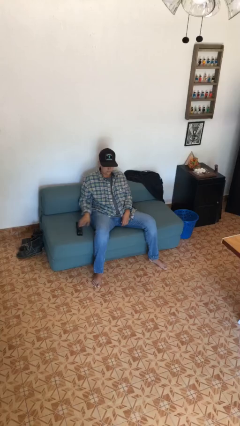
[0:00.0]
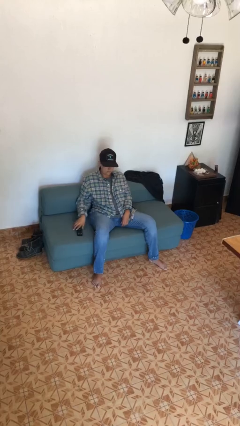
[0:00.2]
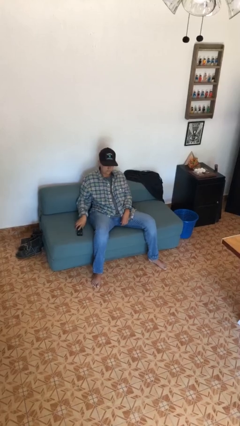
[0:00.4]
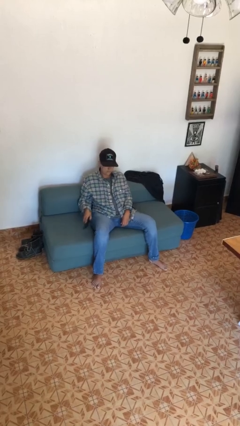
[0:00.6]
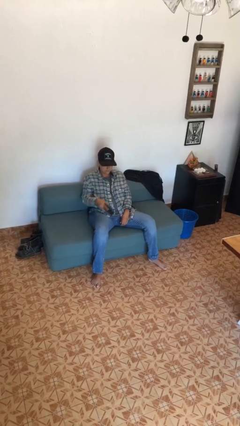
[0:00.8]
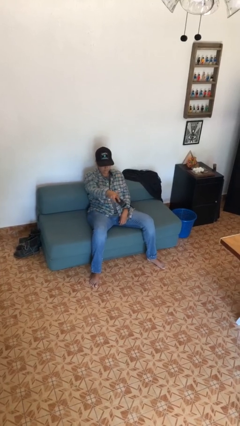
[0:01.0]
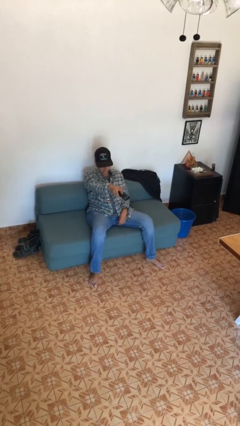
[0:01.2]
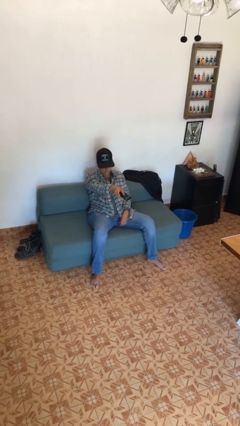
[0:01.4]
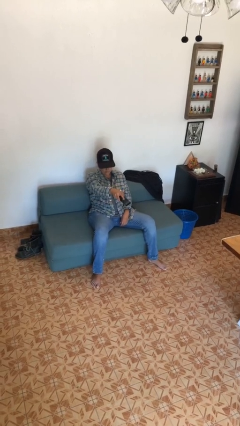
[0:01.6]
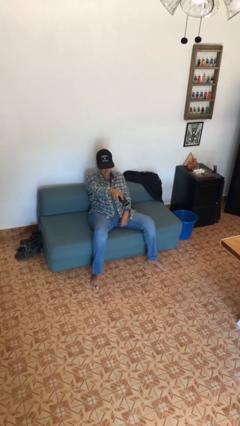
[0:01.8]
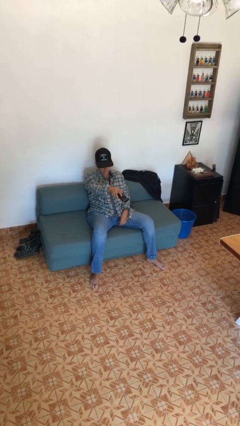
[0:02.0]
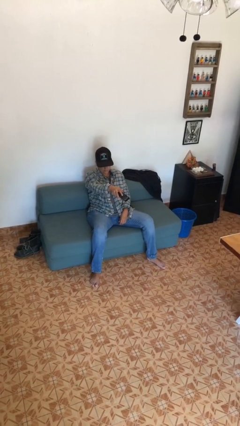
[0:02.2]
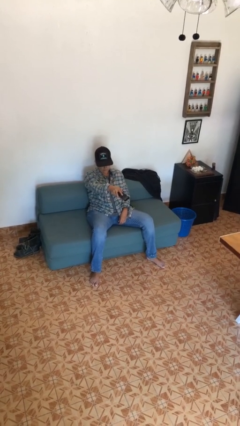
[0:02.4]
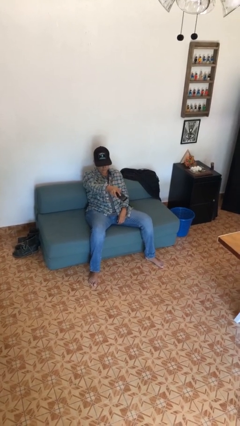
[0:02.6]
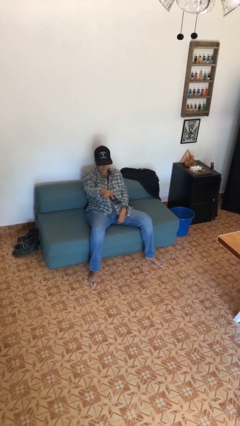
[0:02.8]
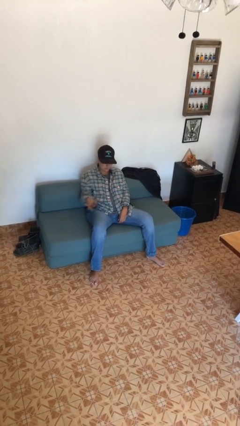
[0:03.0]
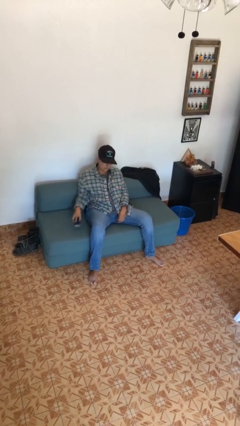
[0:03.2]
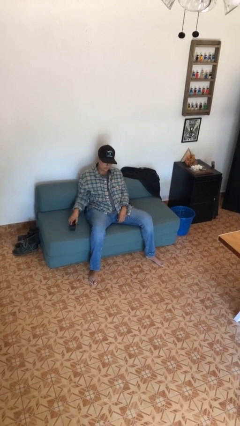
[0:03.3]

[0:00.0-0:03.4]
person uses television remote

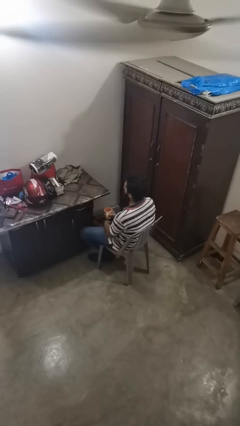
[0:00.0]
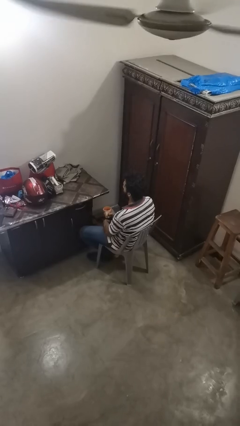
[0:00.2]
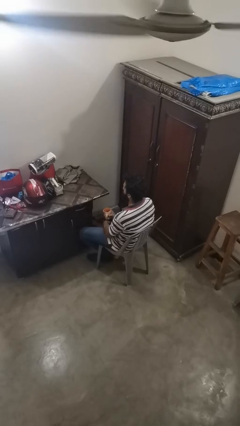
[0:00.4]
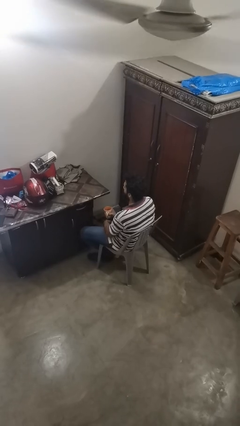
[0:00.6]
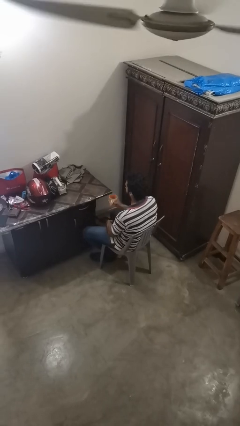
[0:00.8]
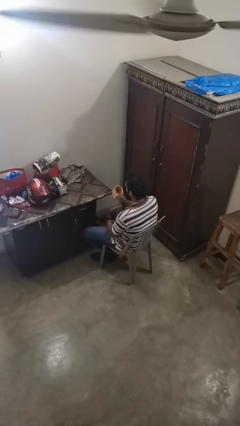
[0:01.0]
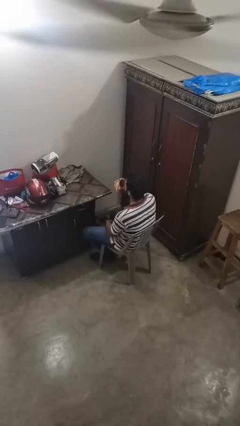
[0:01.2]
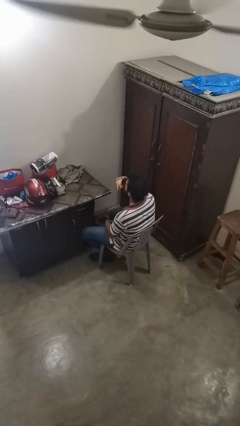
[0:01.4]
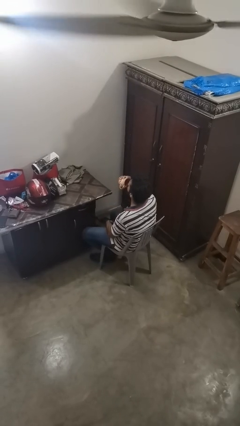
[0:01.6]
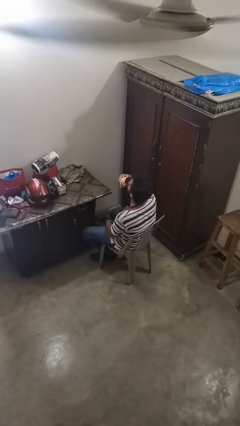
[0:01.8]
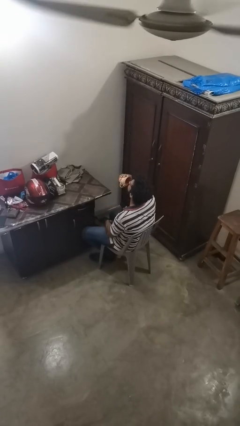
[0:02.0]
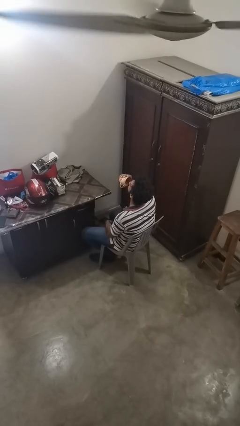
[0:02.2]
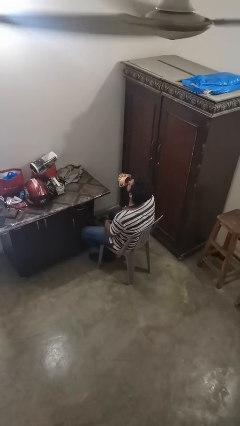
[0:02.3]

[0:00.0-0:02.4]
person drinks from mug

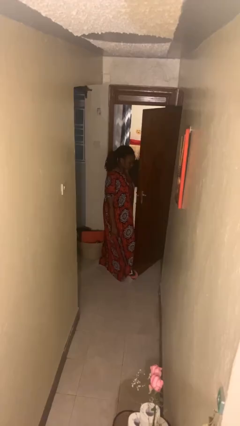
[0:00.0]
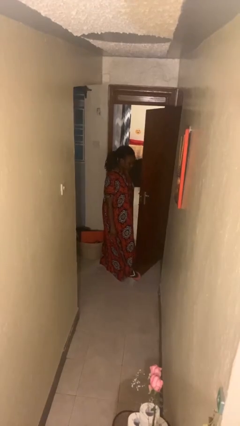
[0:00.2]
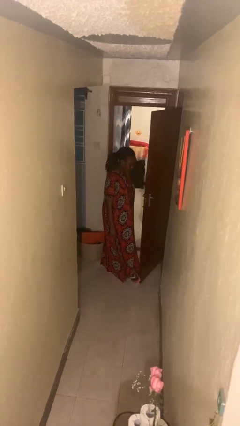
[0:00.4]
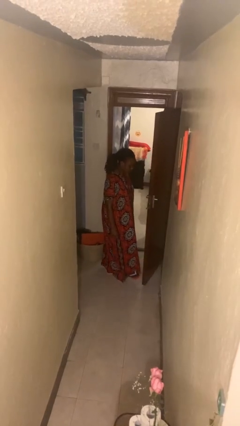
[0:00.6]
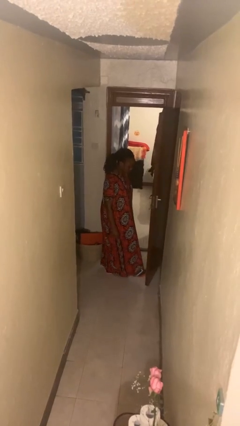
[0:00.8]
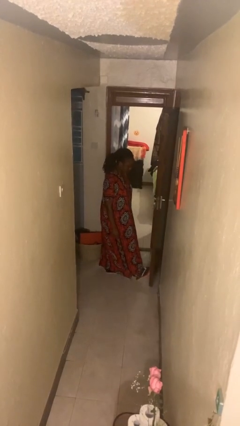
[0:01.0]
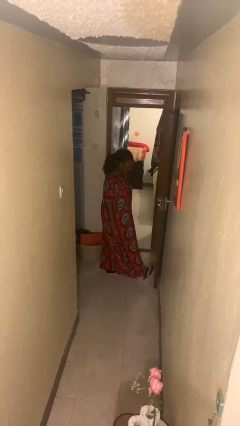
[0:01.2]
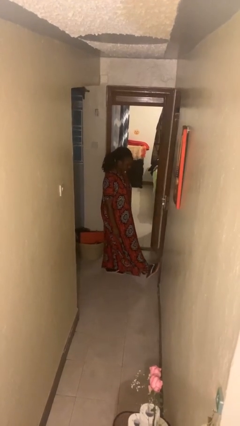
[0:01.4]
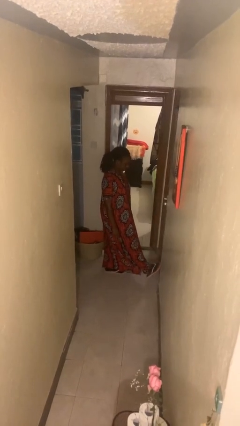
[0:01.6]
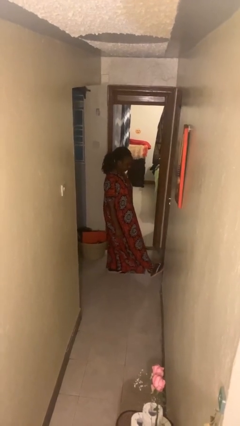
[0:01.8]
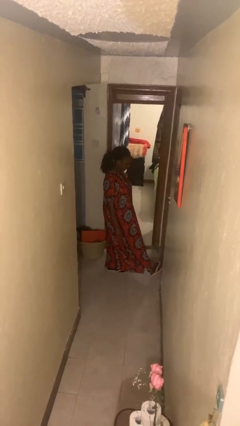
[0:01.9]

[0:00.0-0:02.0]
person closes door with foot

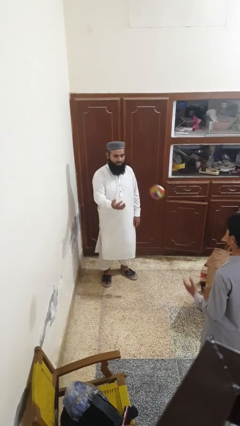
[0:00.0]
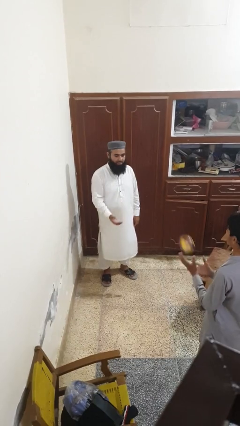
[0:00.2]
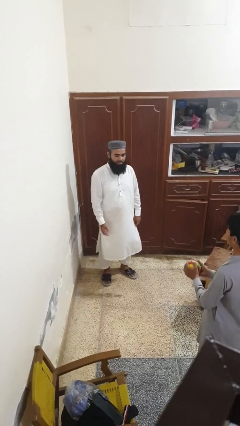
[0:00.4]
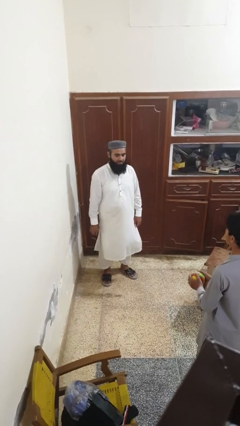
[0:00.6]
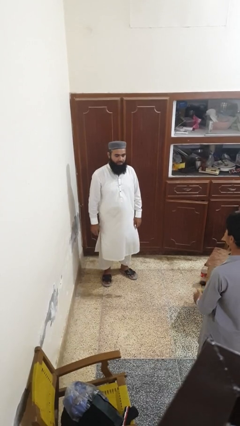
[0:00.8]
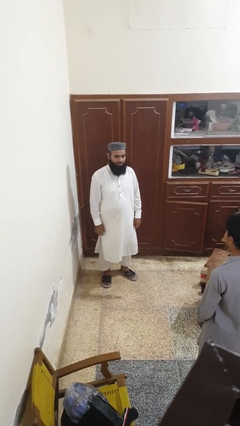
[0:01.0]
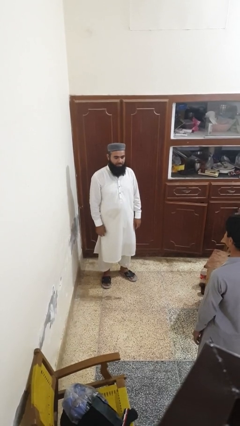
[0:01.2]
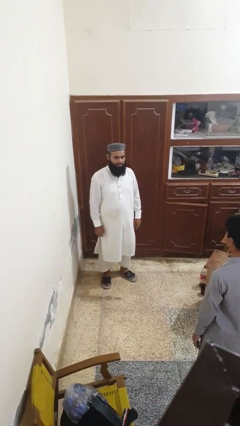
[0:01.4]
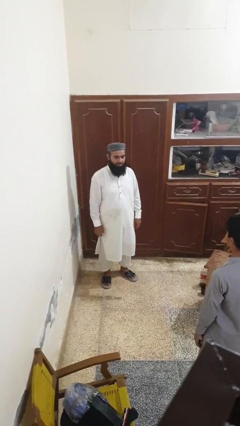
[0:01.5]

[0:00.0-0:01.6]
person throws object to person

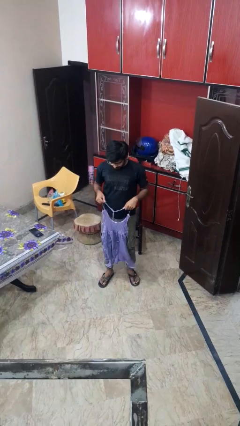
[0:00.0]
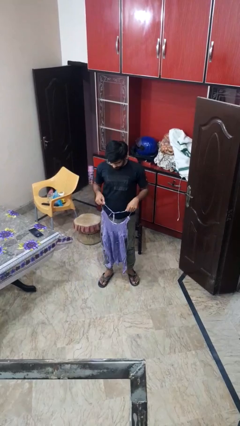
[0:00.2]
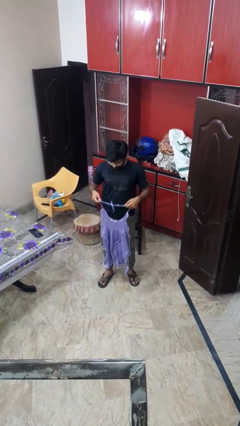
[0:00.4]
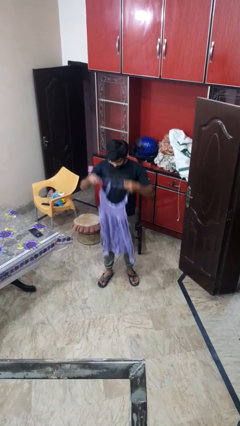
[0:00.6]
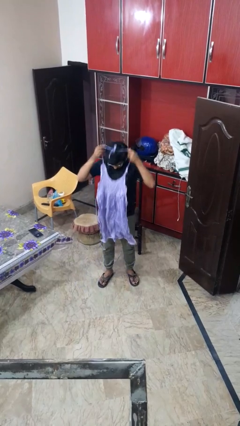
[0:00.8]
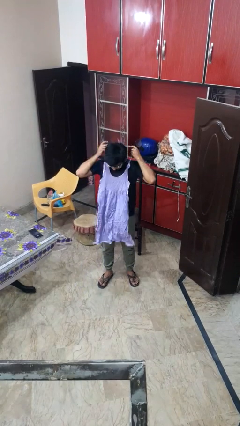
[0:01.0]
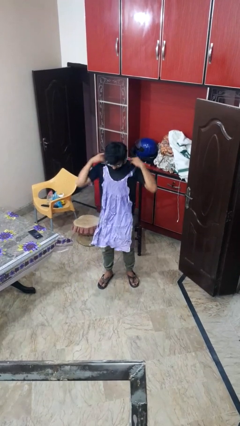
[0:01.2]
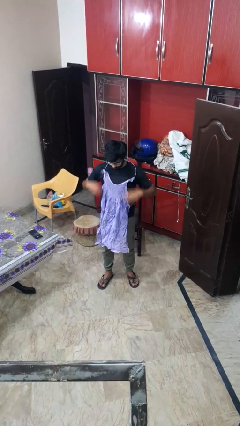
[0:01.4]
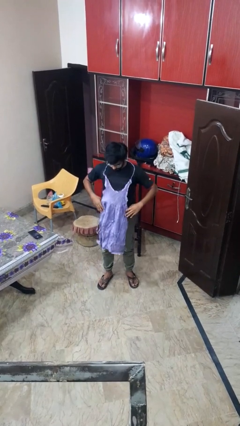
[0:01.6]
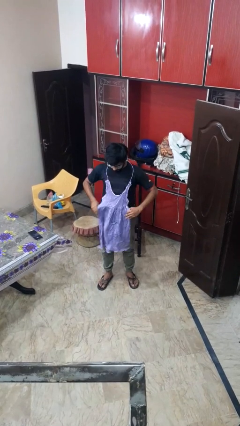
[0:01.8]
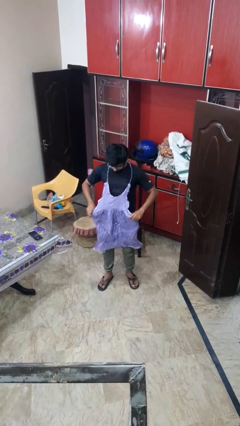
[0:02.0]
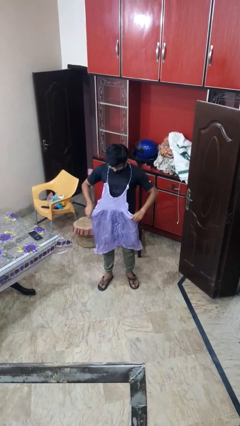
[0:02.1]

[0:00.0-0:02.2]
person puts on apron

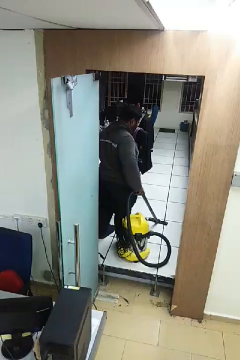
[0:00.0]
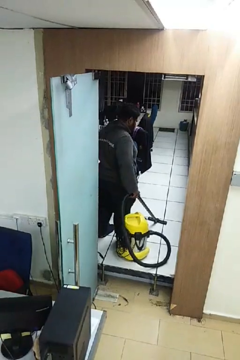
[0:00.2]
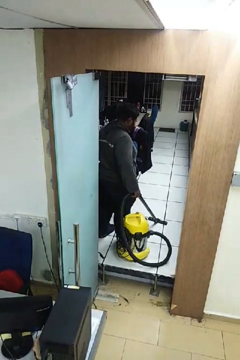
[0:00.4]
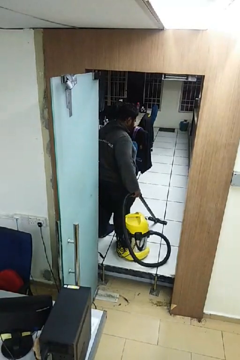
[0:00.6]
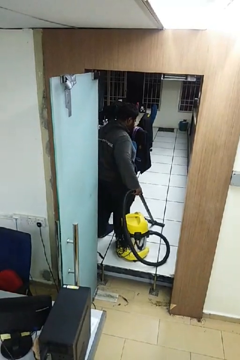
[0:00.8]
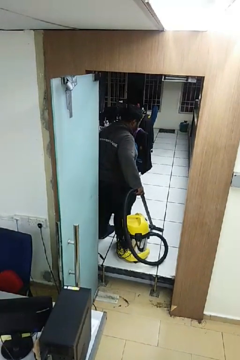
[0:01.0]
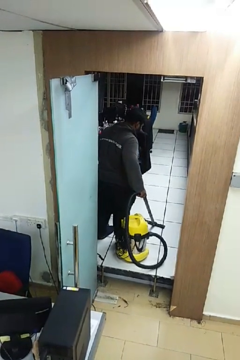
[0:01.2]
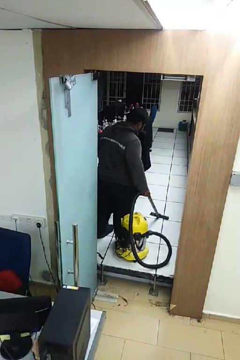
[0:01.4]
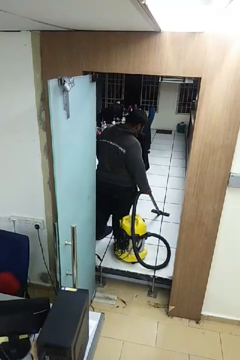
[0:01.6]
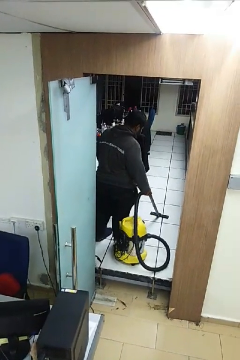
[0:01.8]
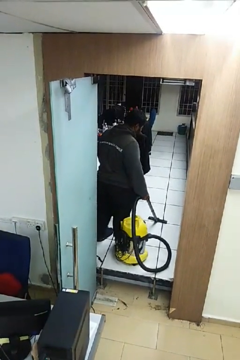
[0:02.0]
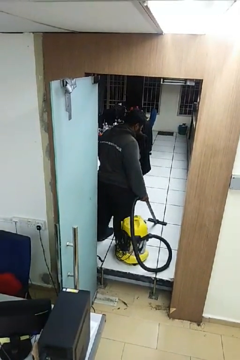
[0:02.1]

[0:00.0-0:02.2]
person vacuums carpet

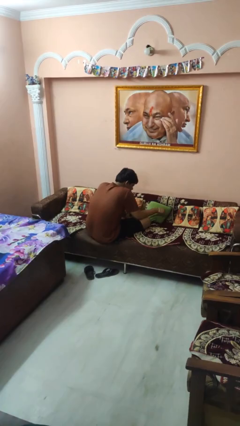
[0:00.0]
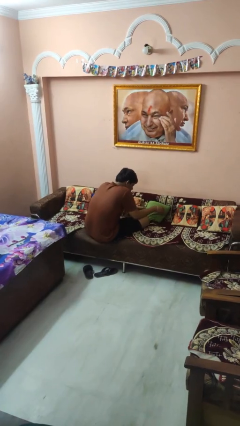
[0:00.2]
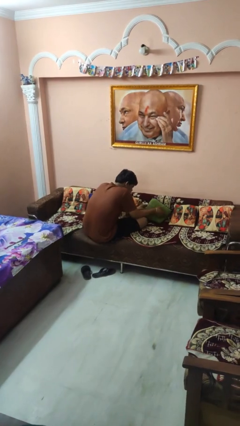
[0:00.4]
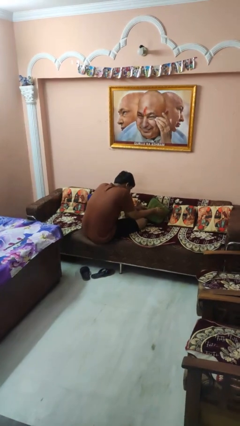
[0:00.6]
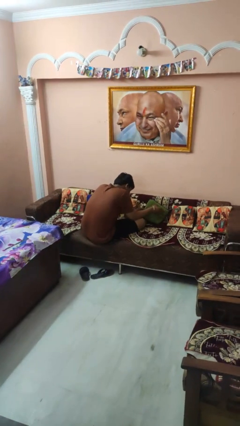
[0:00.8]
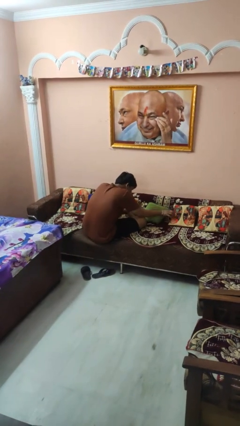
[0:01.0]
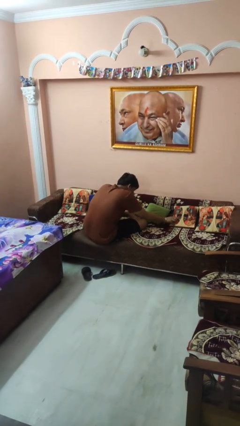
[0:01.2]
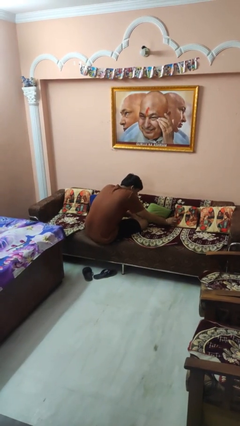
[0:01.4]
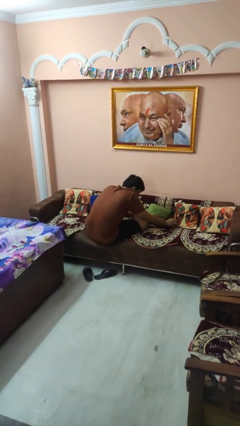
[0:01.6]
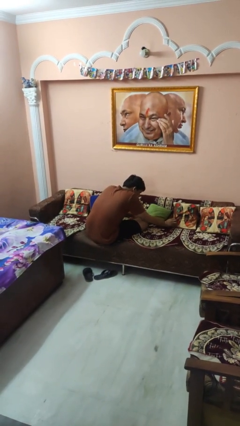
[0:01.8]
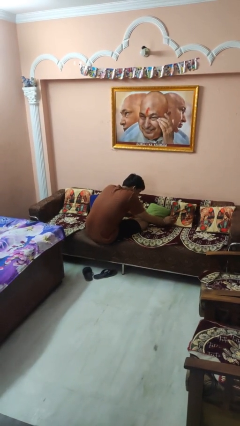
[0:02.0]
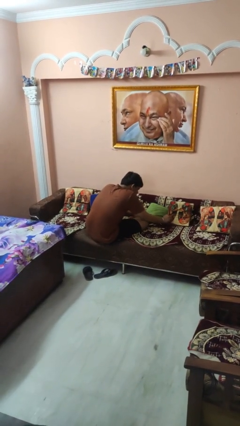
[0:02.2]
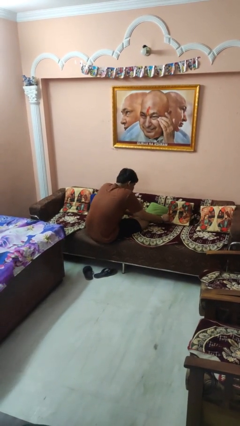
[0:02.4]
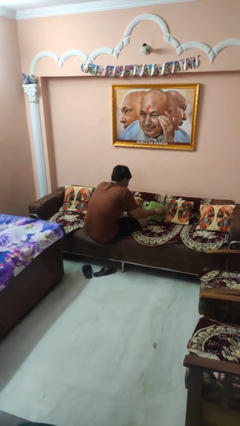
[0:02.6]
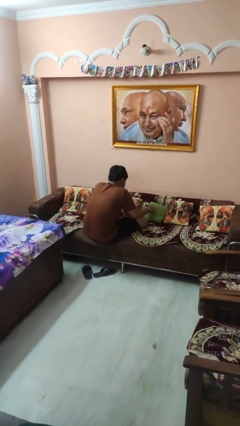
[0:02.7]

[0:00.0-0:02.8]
person searches in couch

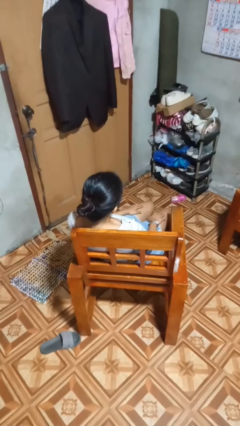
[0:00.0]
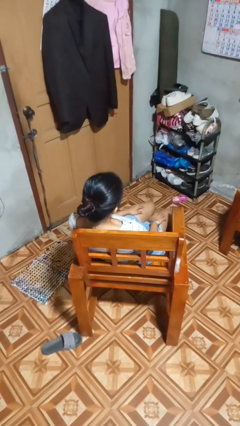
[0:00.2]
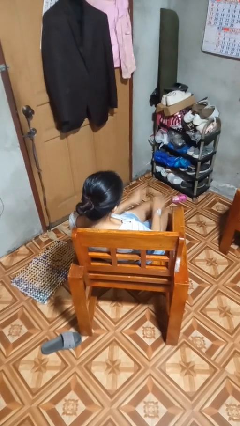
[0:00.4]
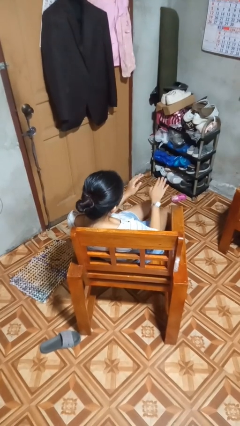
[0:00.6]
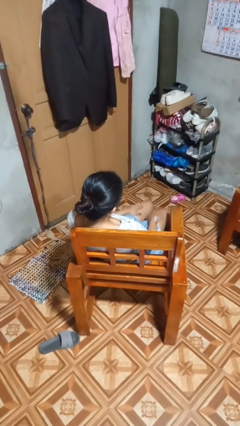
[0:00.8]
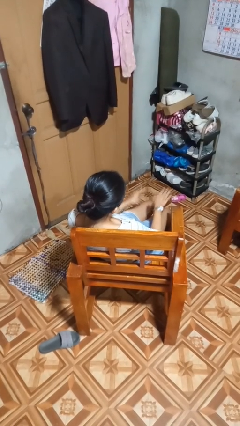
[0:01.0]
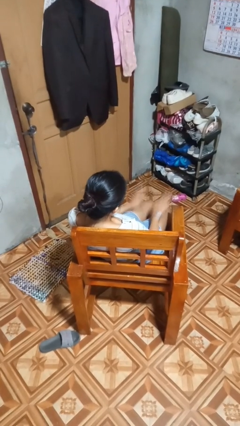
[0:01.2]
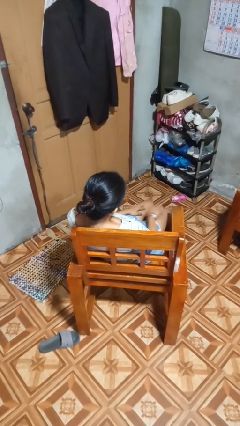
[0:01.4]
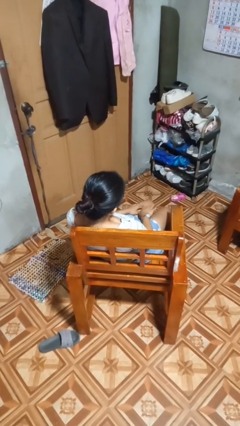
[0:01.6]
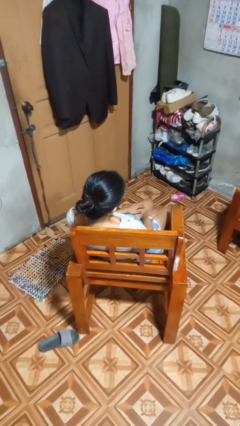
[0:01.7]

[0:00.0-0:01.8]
person slaps hands on thighs
